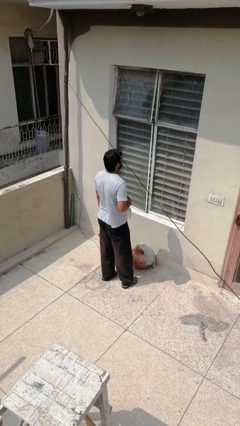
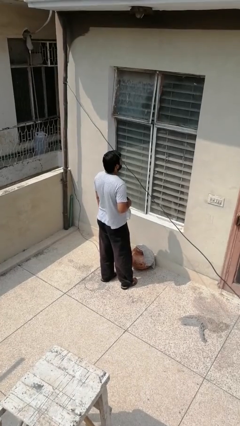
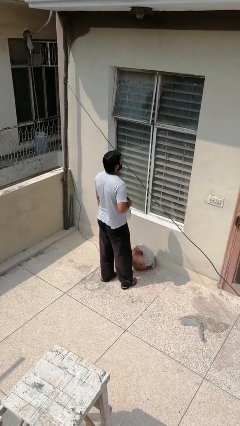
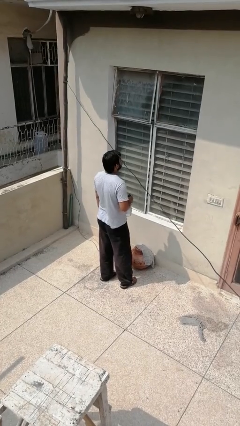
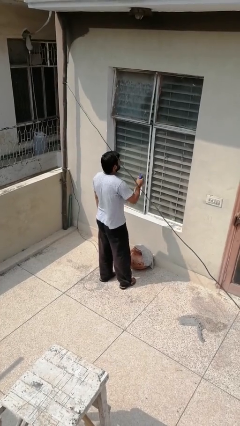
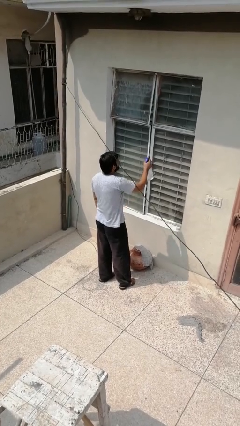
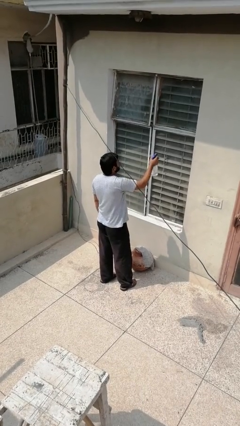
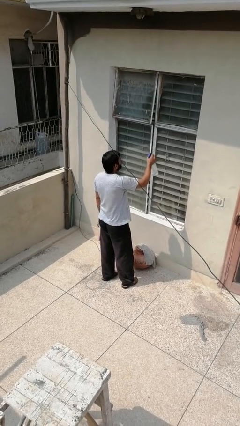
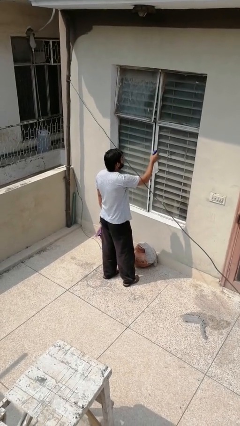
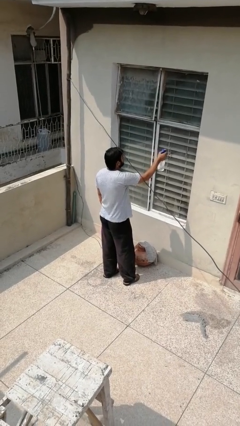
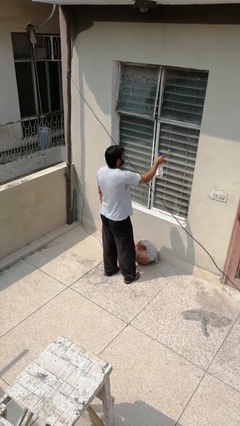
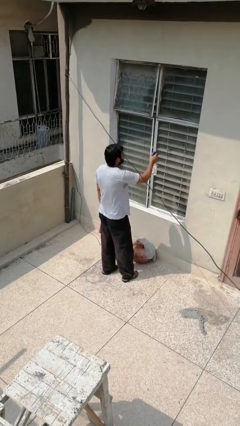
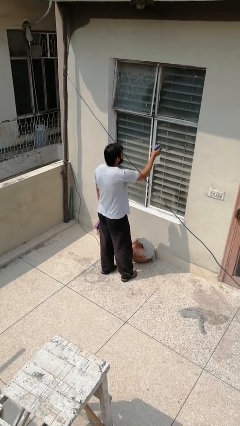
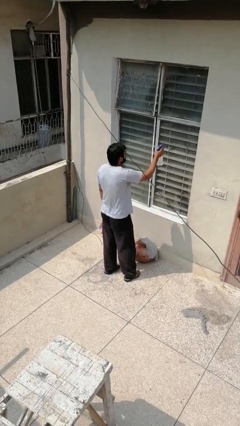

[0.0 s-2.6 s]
person sprays from bottle

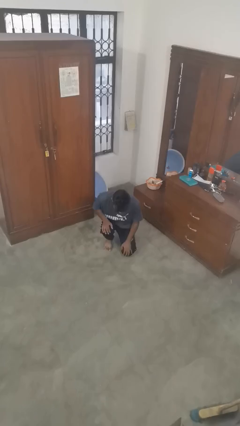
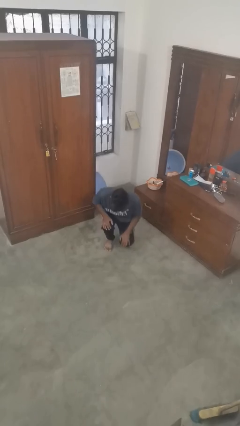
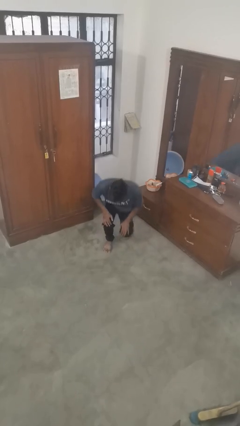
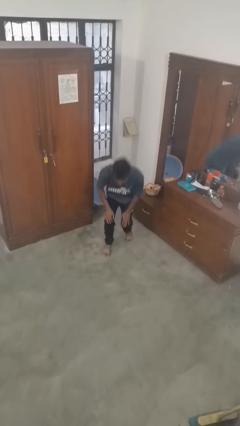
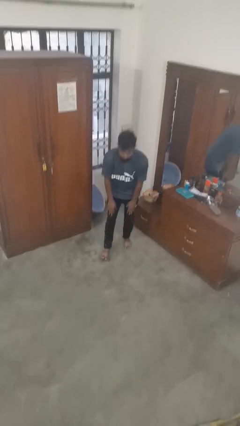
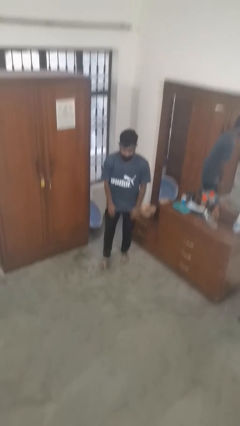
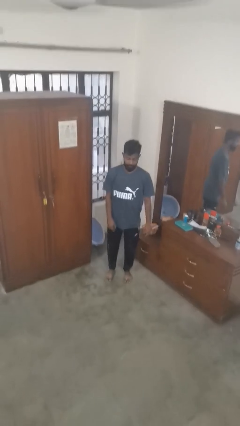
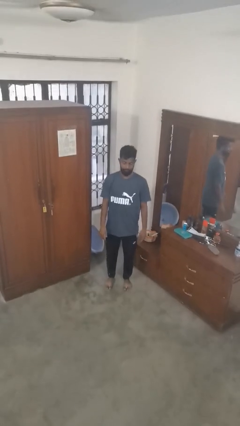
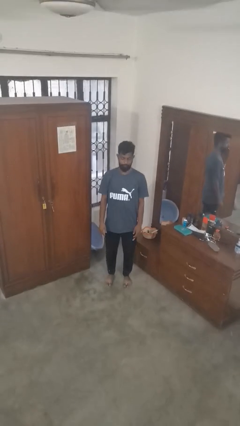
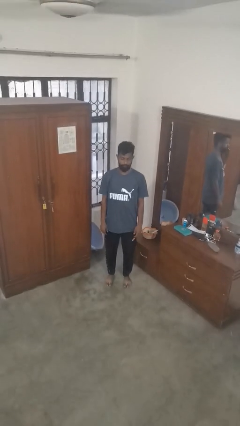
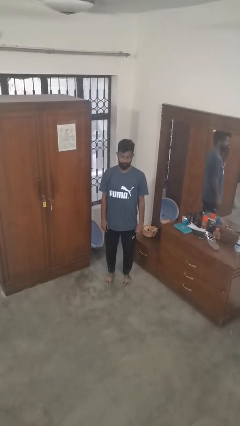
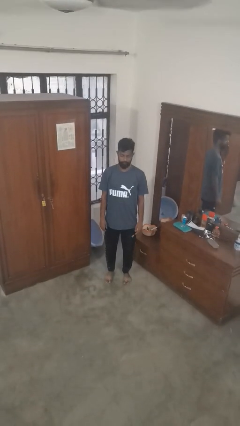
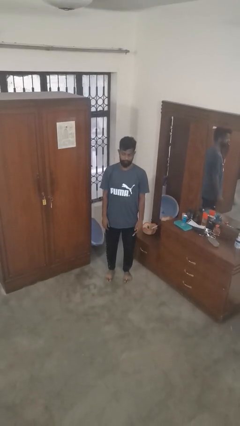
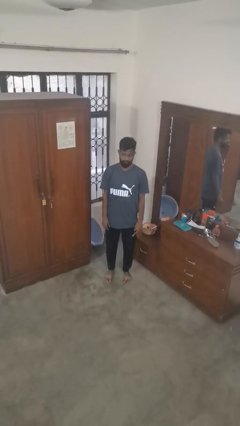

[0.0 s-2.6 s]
person stands up from floor

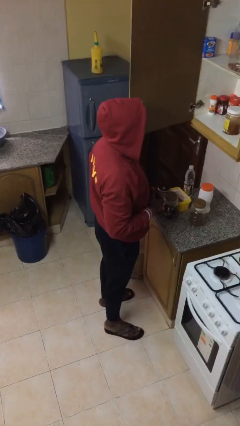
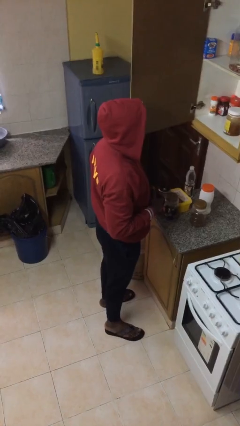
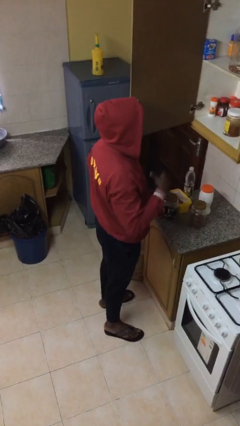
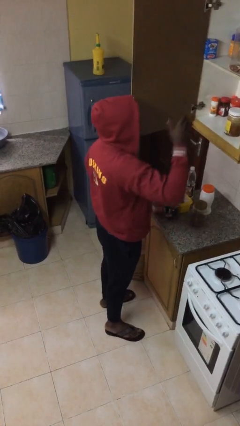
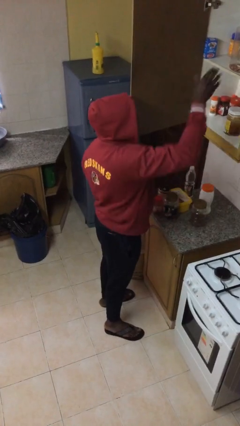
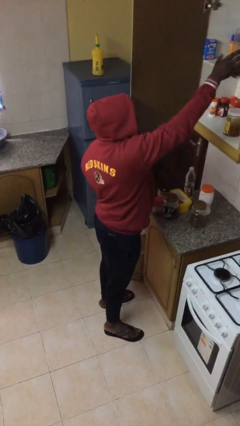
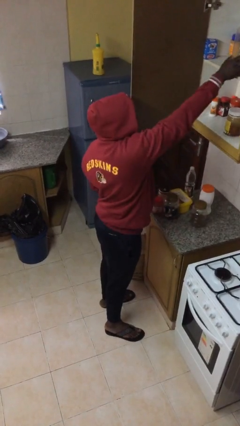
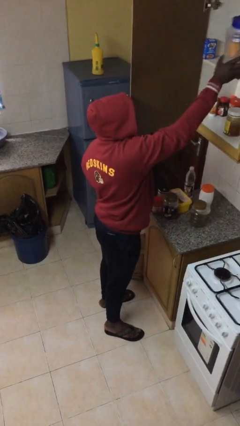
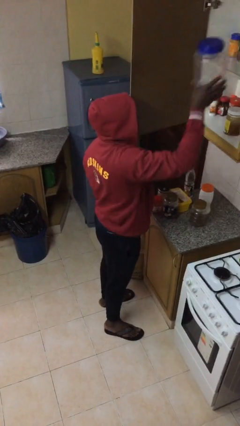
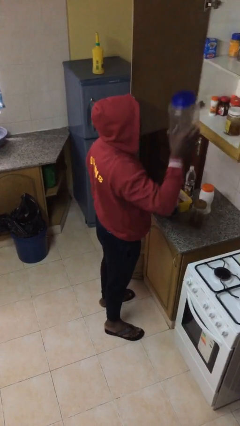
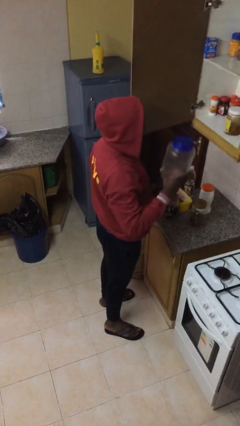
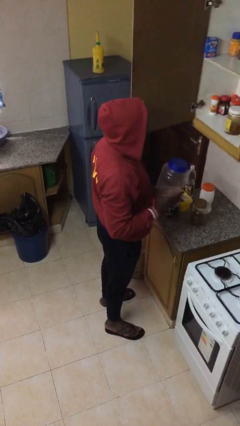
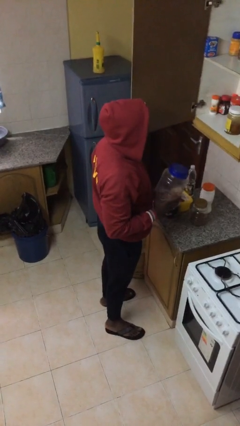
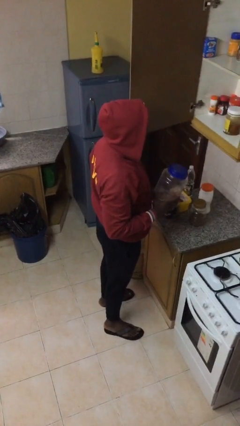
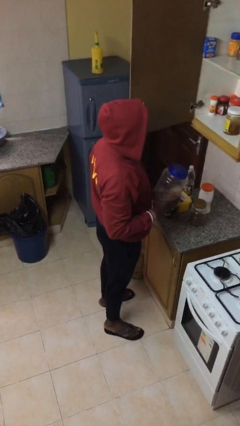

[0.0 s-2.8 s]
person picks up object from shelf

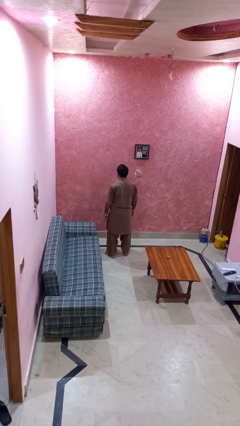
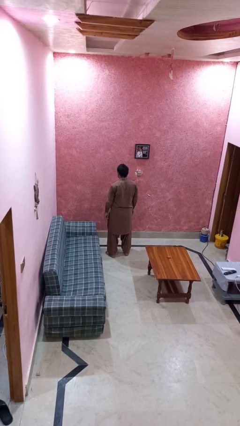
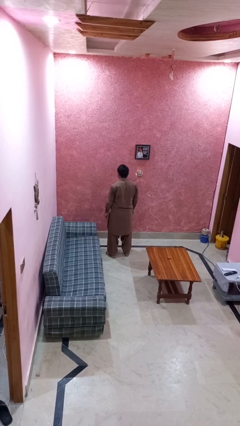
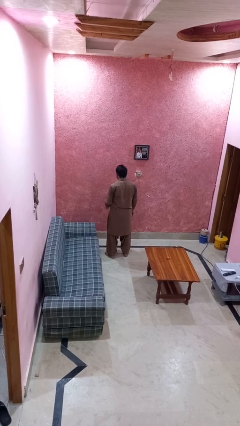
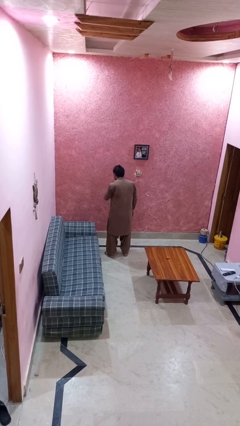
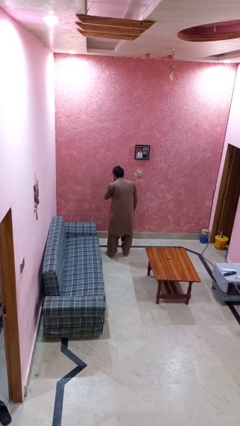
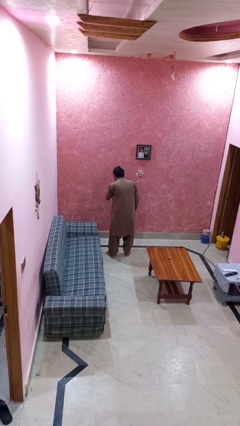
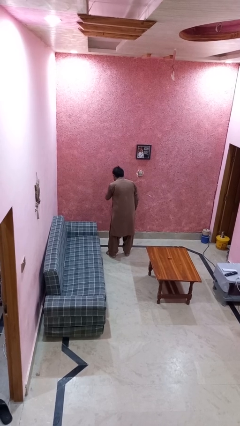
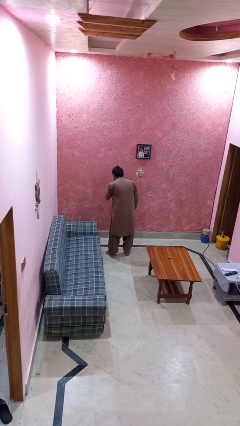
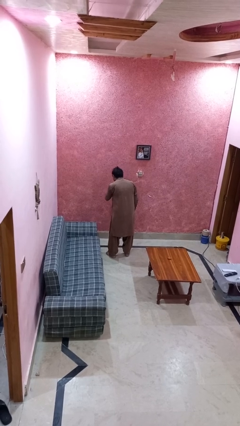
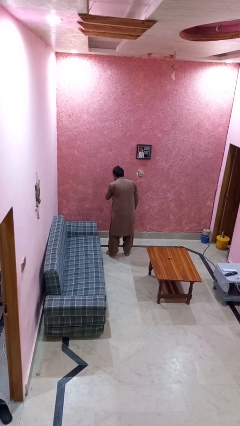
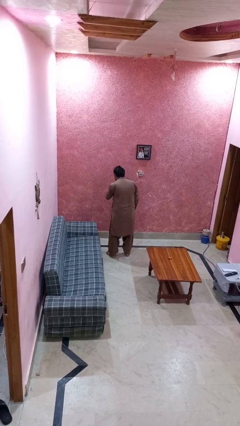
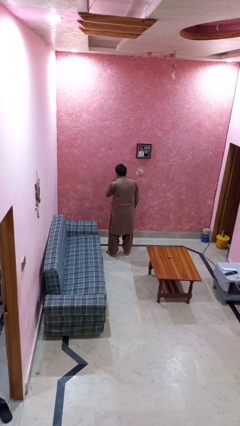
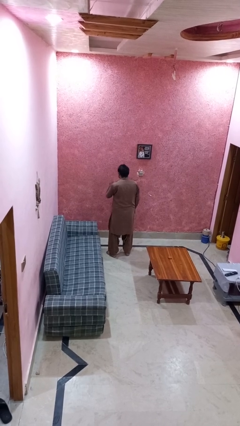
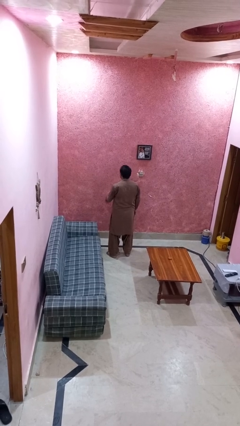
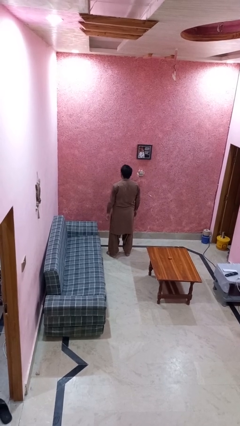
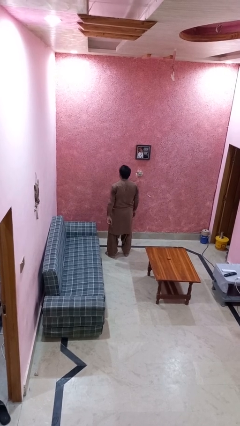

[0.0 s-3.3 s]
person gestures be quiet

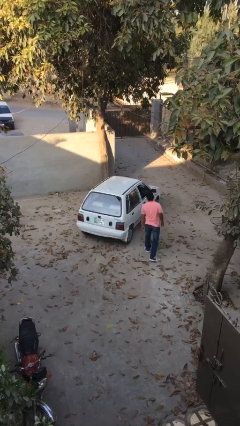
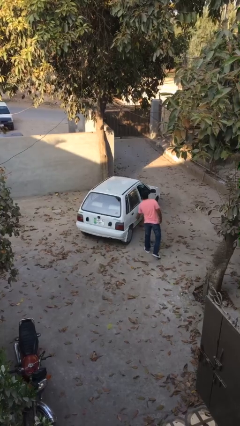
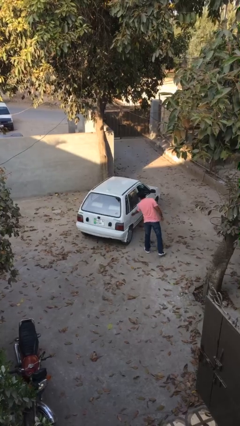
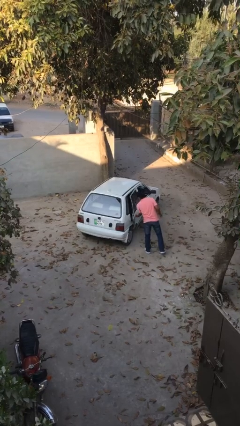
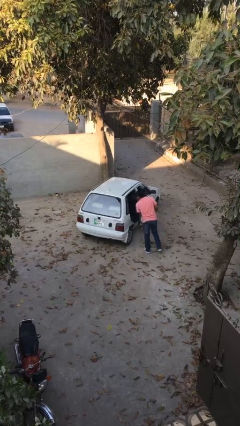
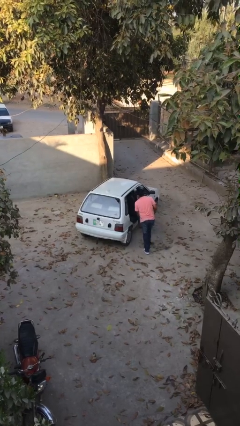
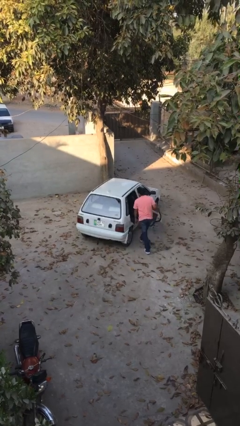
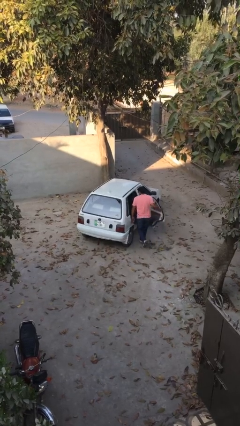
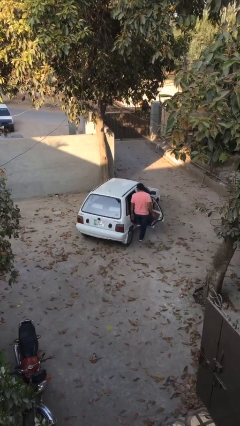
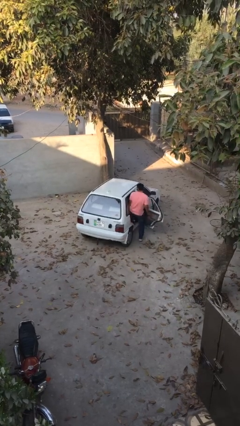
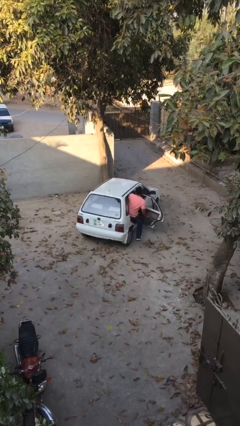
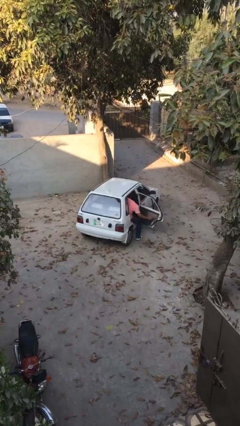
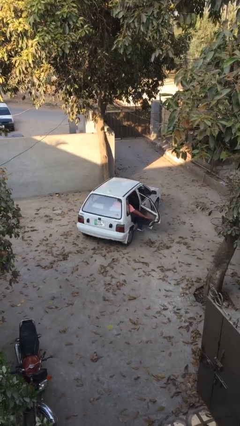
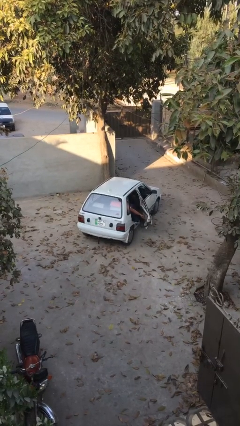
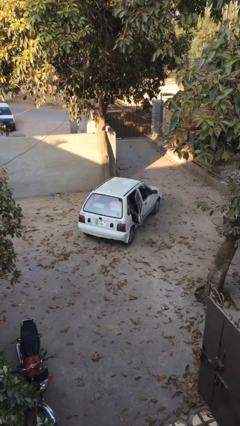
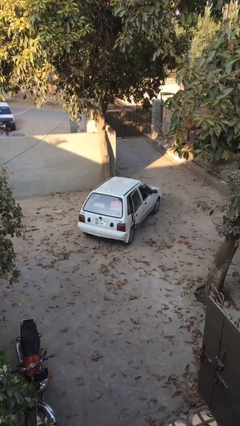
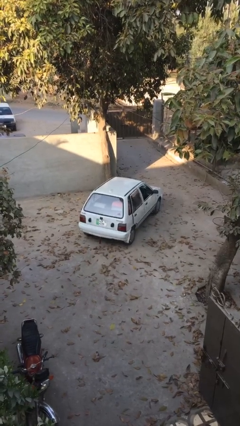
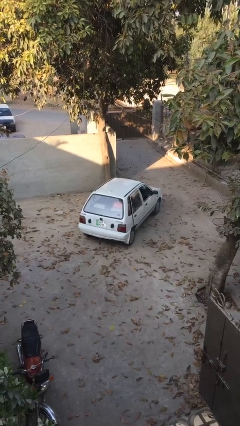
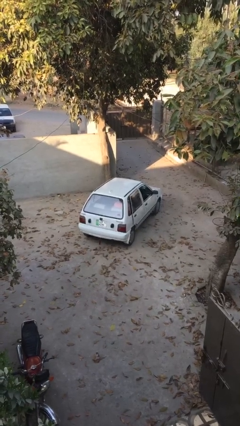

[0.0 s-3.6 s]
car picks up person

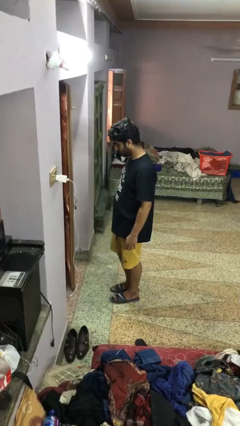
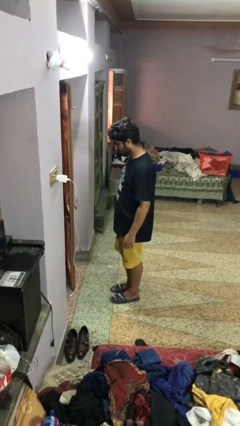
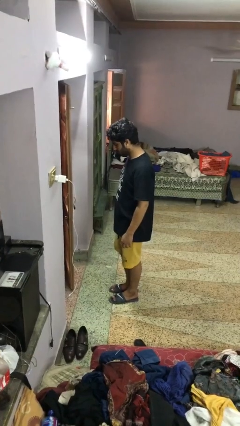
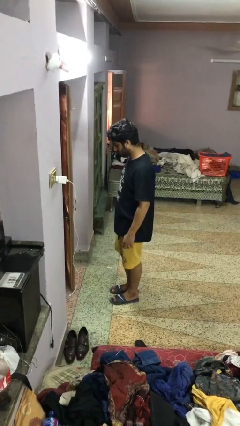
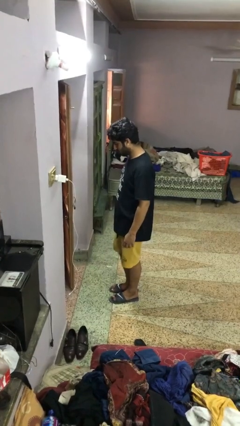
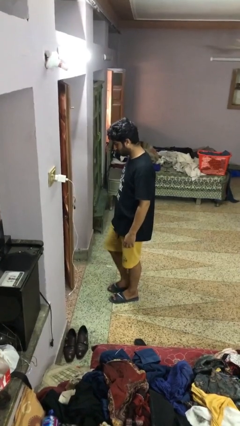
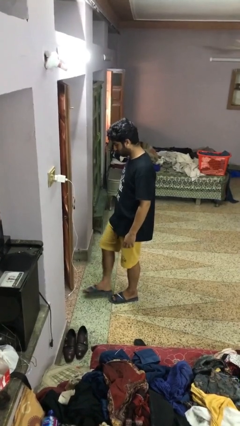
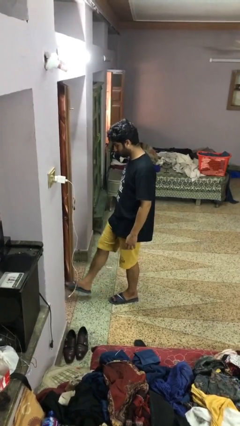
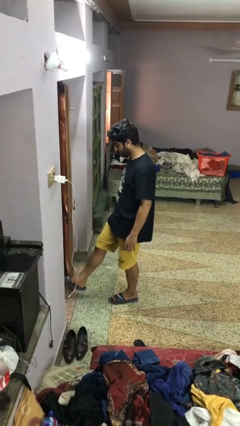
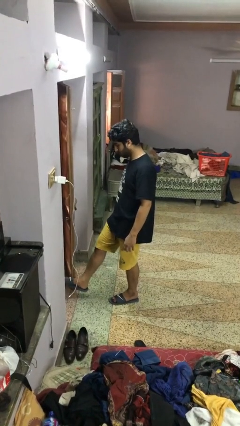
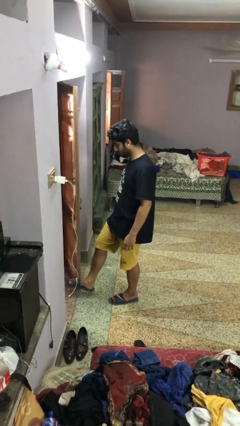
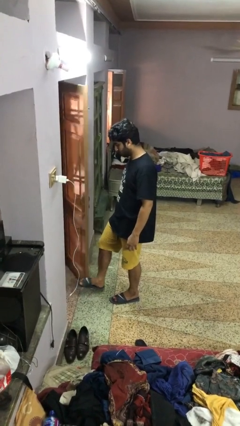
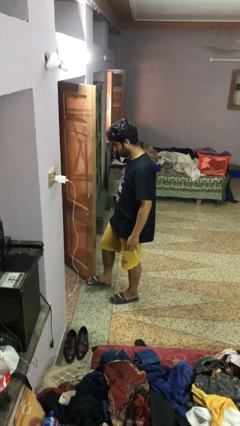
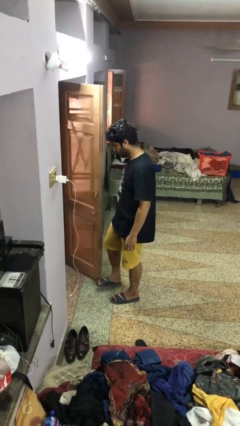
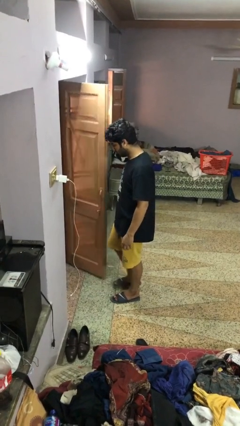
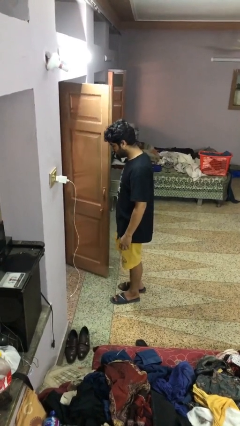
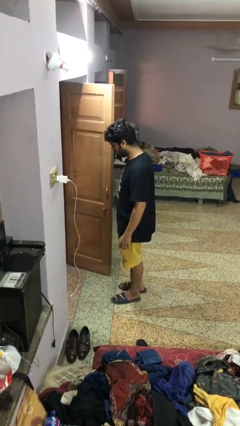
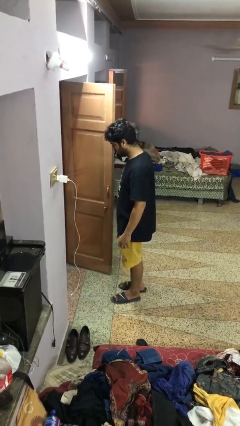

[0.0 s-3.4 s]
person opens facility door
